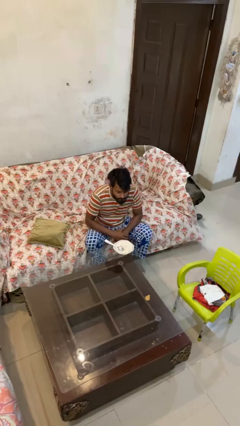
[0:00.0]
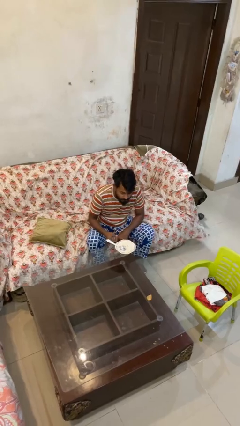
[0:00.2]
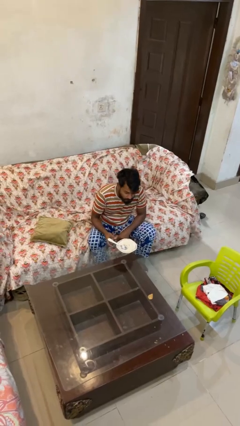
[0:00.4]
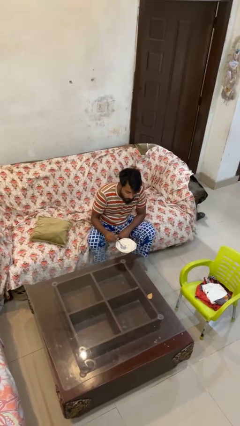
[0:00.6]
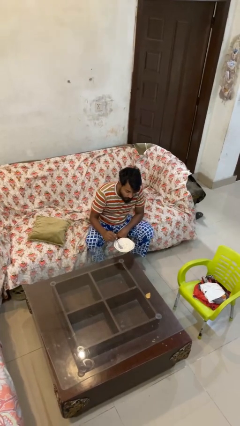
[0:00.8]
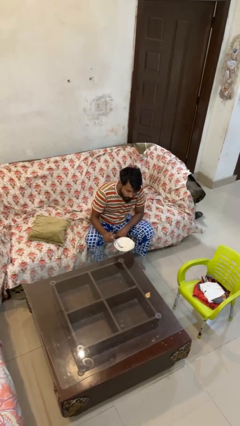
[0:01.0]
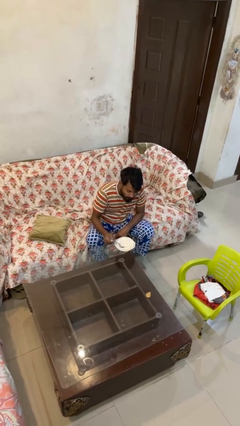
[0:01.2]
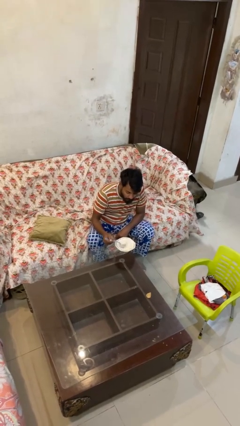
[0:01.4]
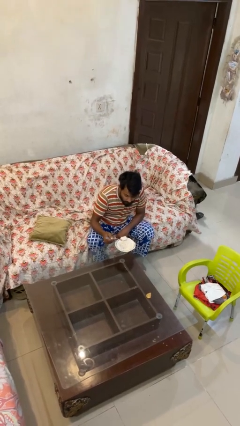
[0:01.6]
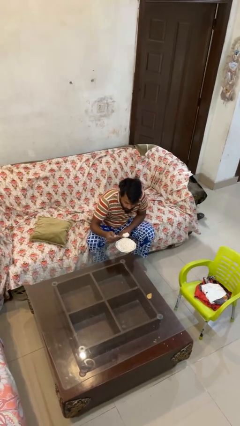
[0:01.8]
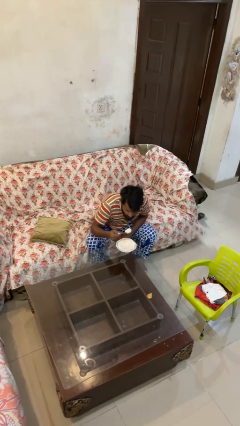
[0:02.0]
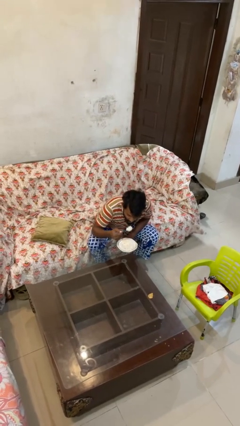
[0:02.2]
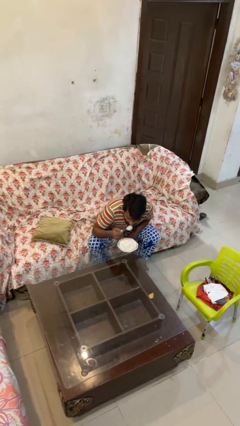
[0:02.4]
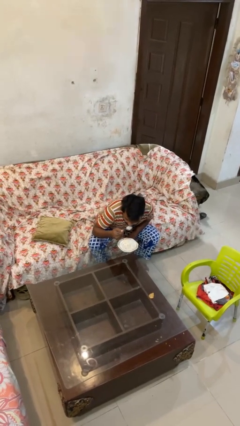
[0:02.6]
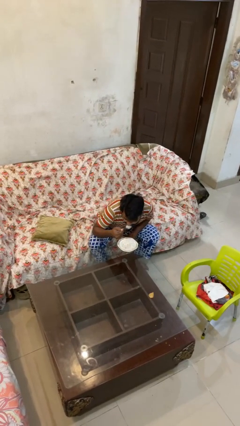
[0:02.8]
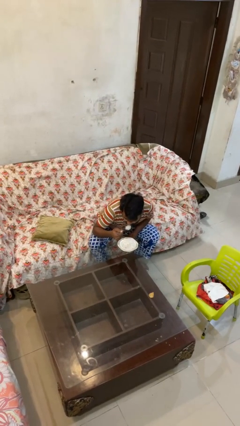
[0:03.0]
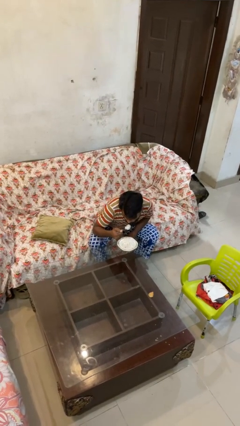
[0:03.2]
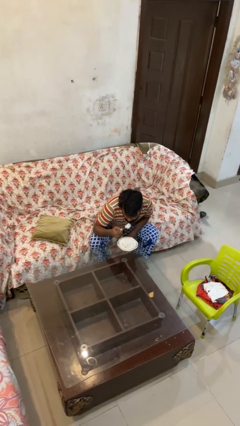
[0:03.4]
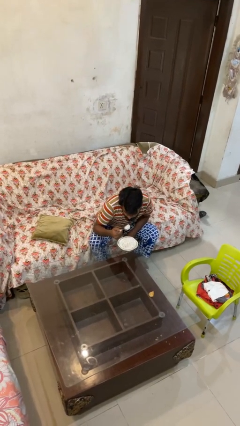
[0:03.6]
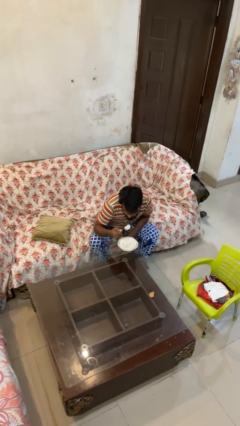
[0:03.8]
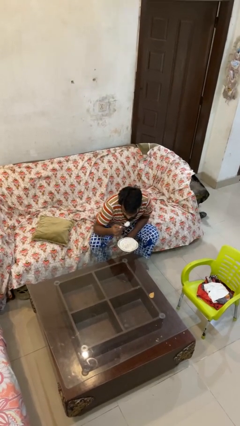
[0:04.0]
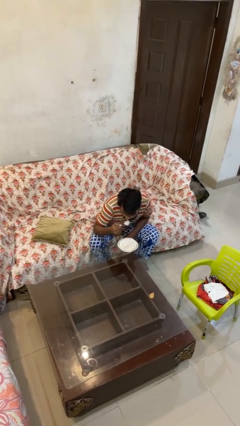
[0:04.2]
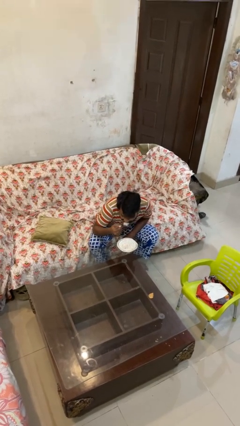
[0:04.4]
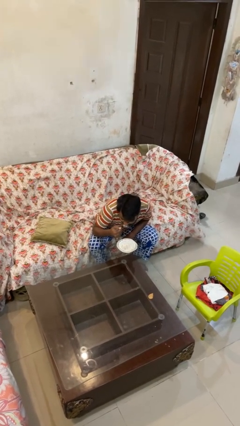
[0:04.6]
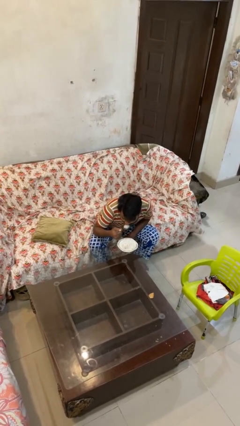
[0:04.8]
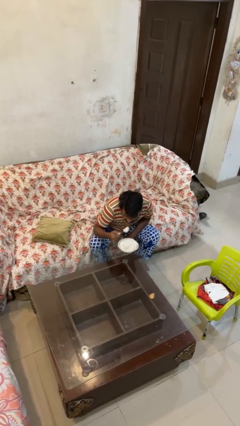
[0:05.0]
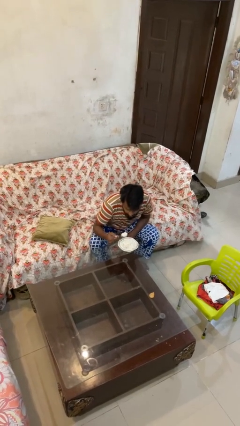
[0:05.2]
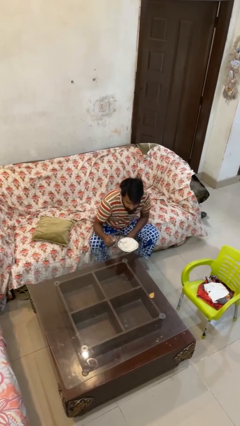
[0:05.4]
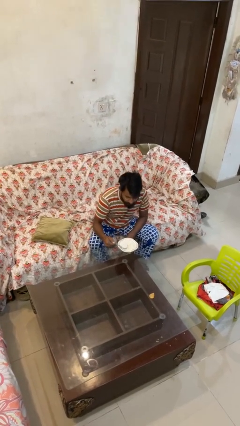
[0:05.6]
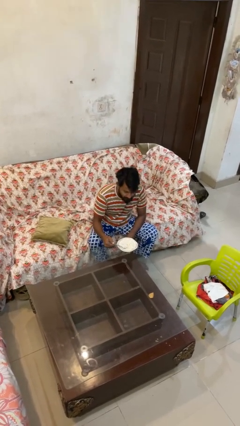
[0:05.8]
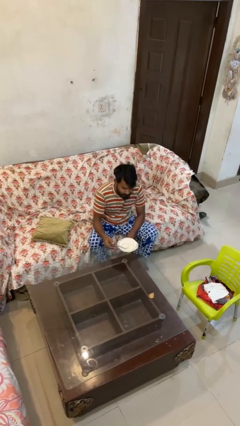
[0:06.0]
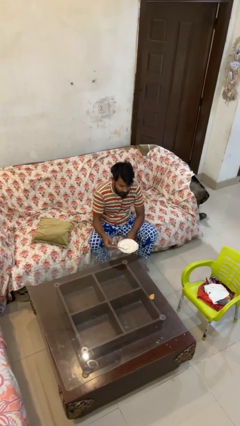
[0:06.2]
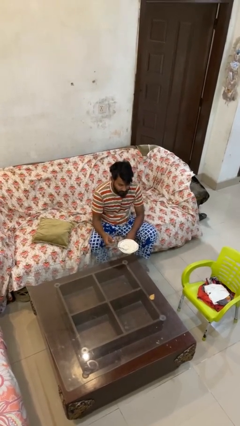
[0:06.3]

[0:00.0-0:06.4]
person eats with utensil

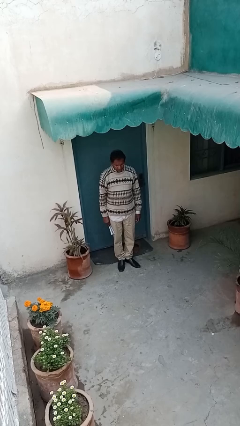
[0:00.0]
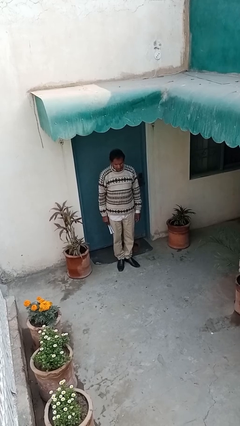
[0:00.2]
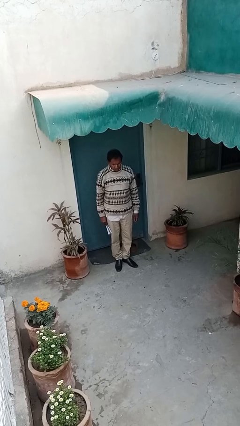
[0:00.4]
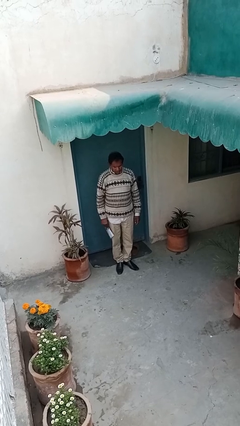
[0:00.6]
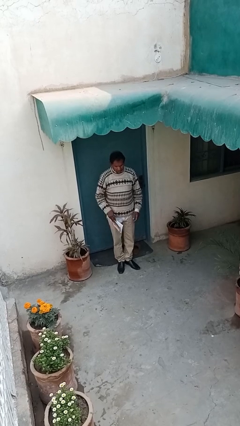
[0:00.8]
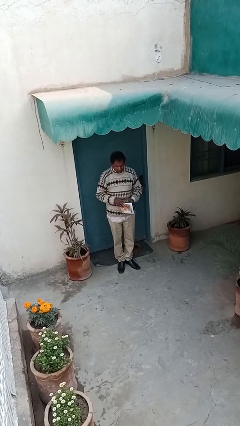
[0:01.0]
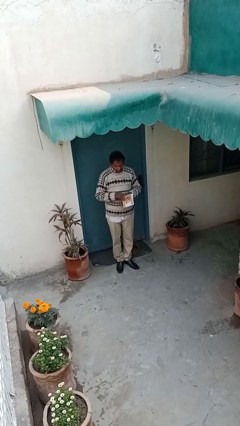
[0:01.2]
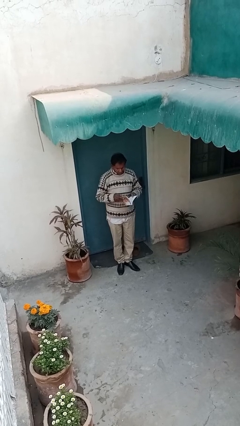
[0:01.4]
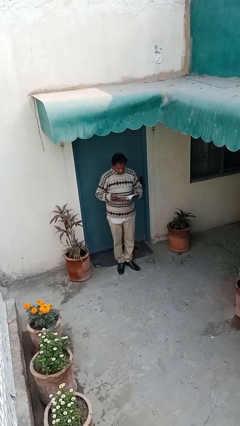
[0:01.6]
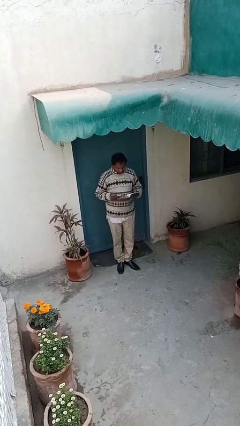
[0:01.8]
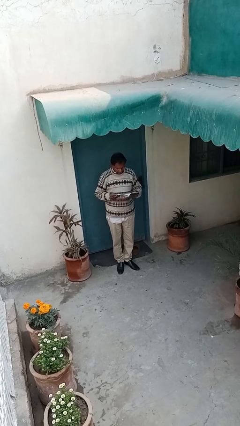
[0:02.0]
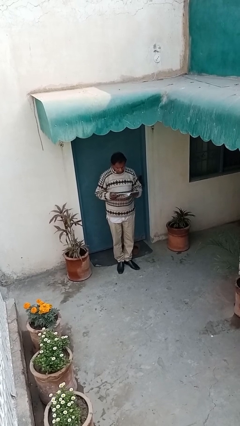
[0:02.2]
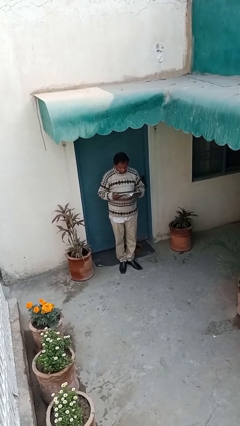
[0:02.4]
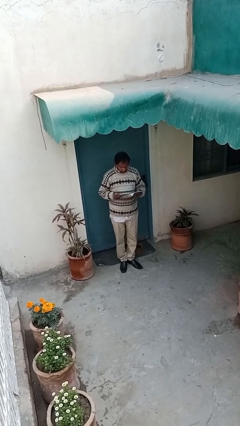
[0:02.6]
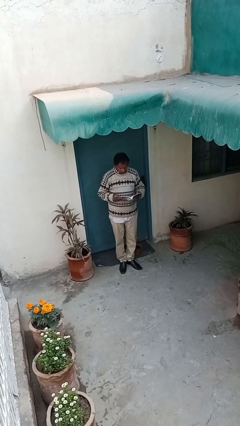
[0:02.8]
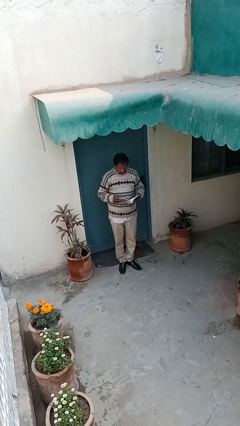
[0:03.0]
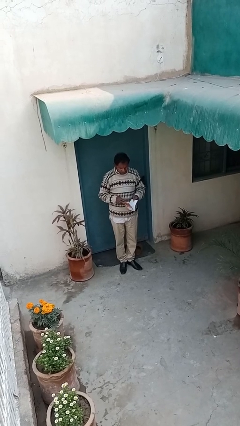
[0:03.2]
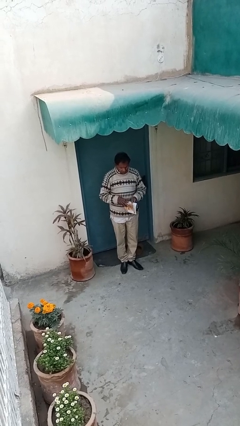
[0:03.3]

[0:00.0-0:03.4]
person reads document

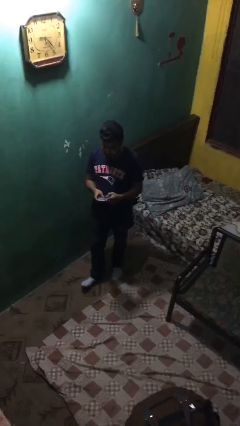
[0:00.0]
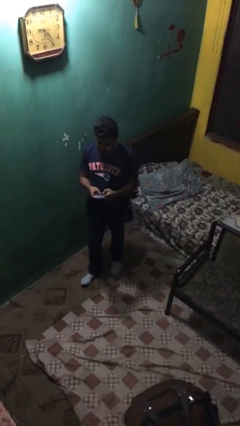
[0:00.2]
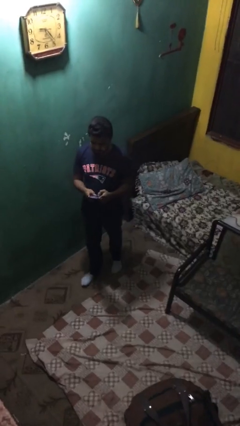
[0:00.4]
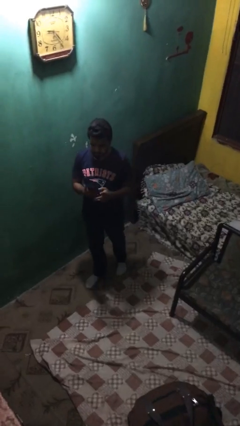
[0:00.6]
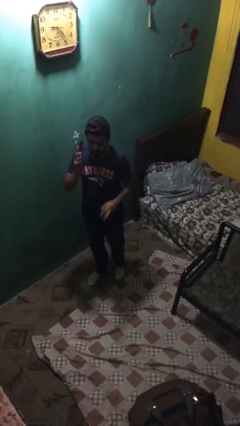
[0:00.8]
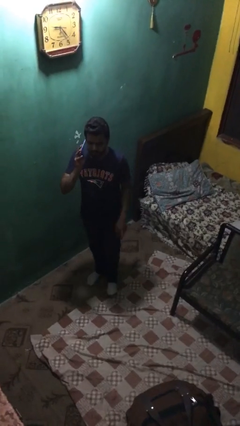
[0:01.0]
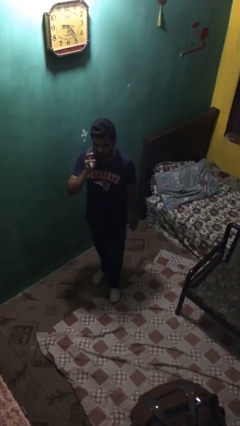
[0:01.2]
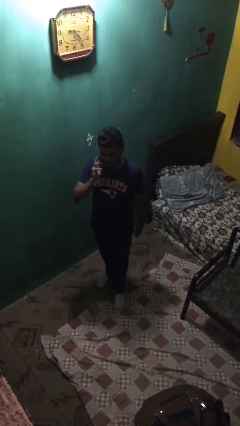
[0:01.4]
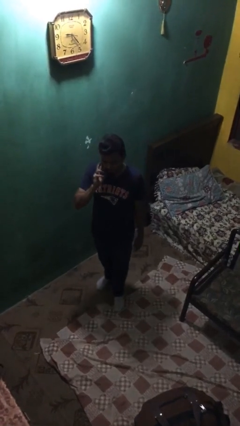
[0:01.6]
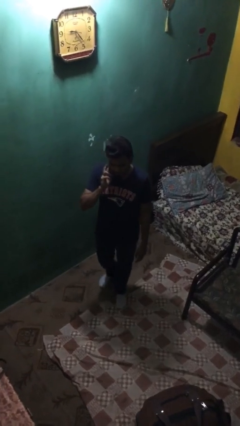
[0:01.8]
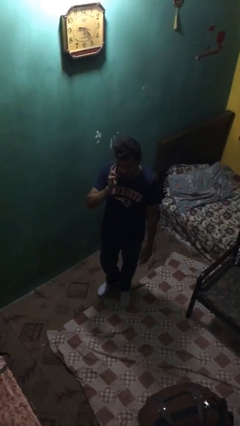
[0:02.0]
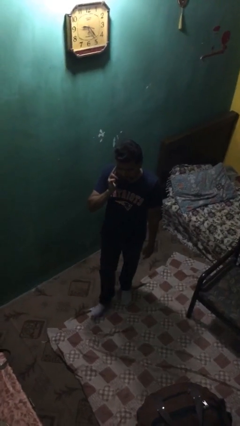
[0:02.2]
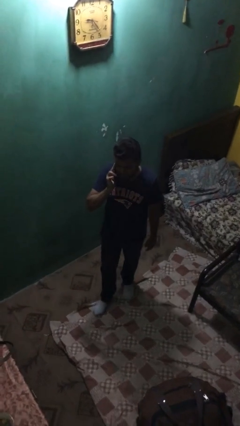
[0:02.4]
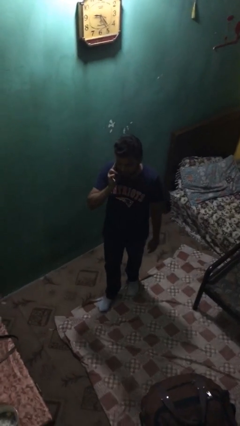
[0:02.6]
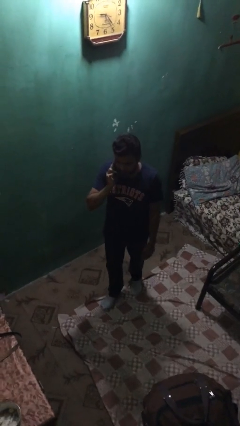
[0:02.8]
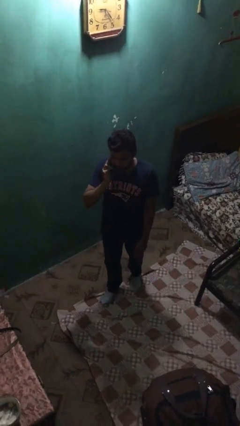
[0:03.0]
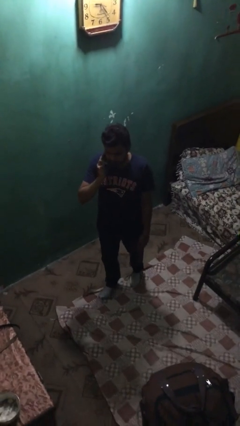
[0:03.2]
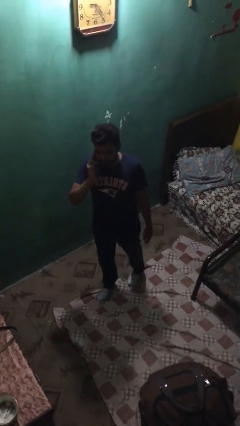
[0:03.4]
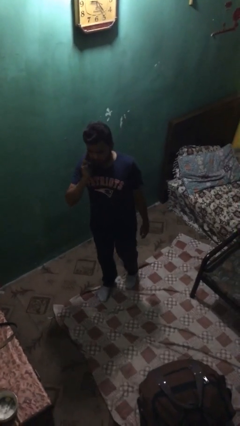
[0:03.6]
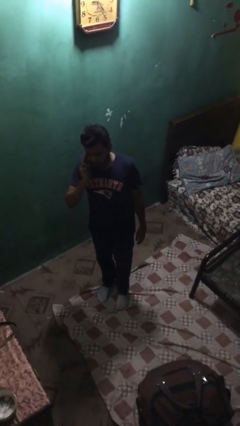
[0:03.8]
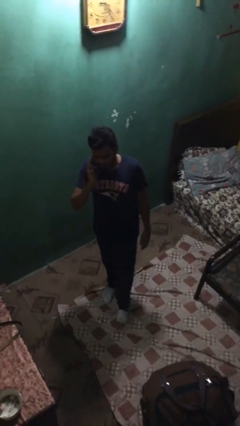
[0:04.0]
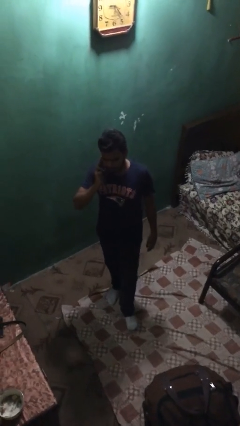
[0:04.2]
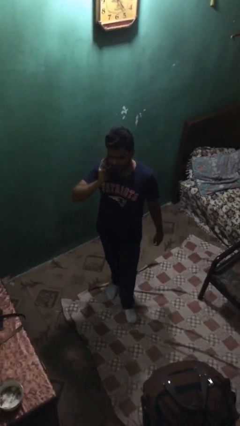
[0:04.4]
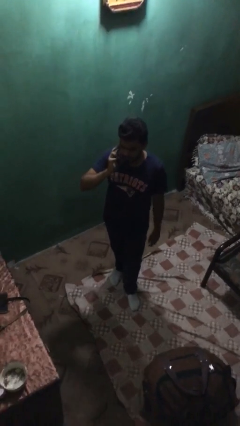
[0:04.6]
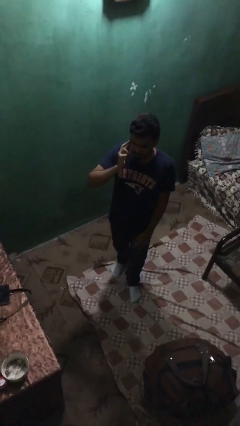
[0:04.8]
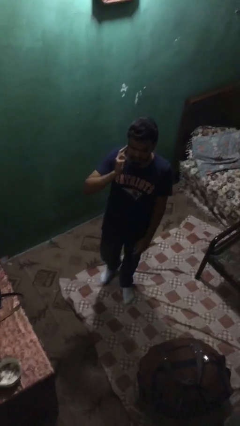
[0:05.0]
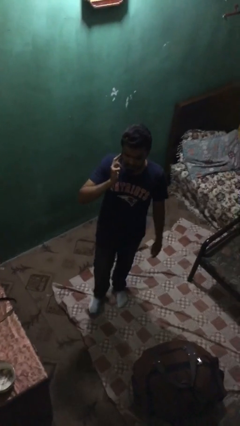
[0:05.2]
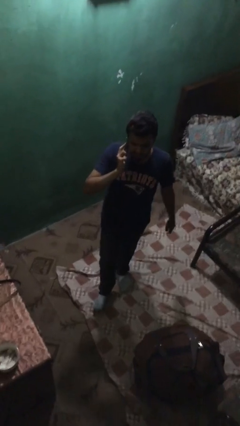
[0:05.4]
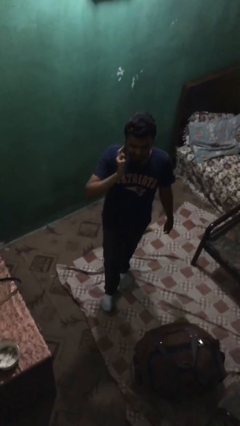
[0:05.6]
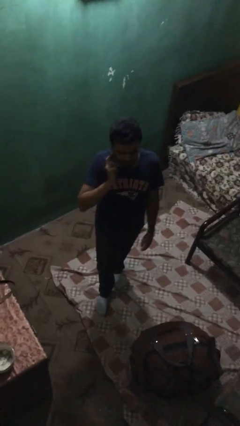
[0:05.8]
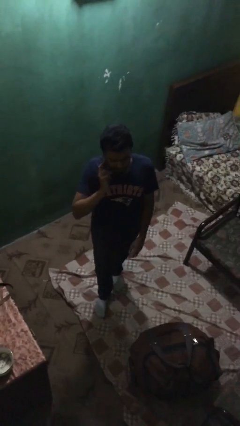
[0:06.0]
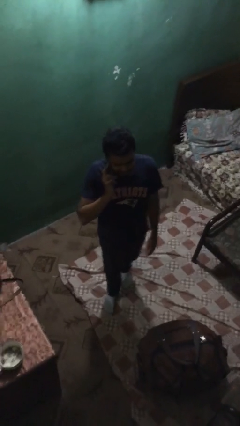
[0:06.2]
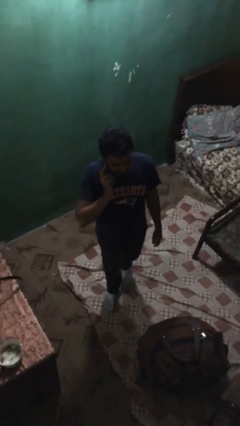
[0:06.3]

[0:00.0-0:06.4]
person talks on phone

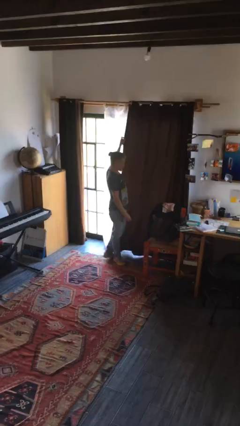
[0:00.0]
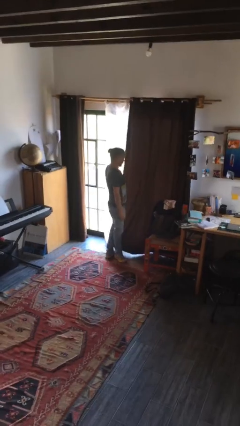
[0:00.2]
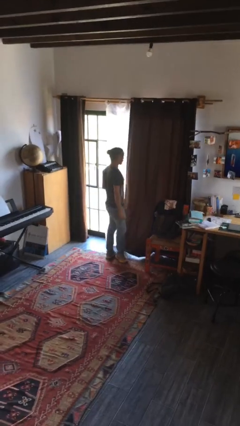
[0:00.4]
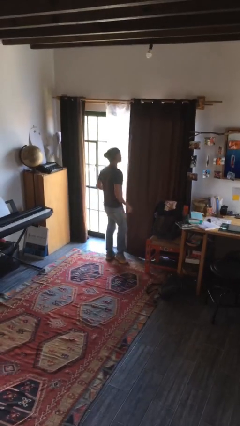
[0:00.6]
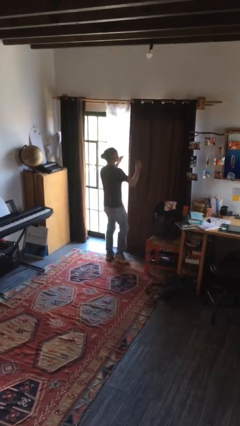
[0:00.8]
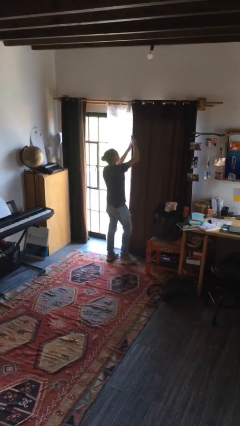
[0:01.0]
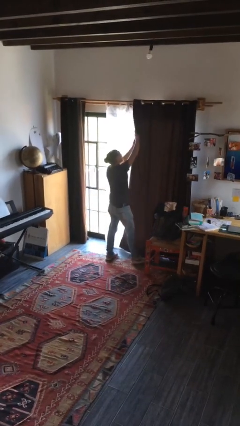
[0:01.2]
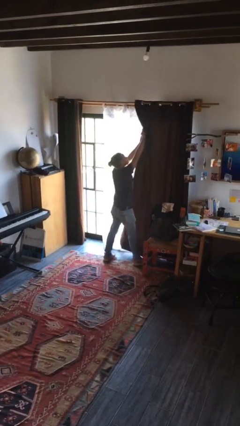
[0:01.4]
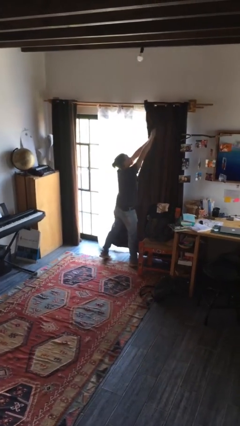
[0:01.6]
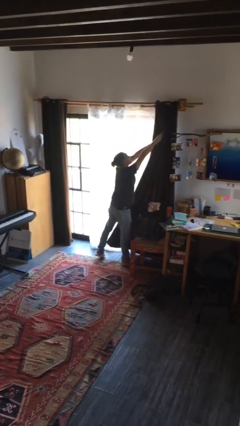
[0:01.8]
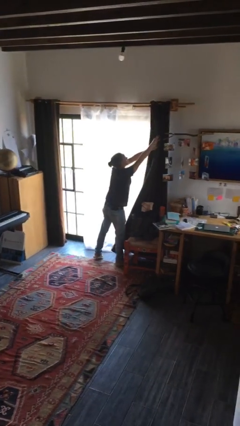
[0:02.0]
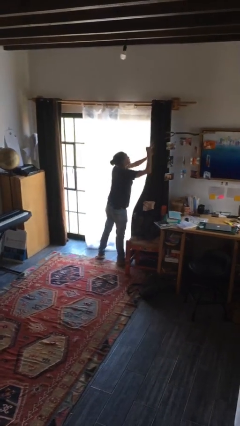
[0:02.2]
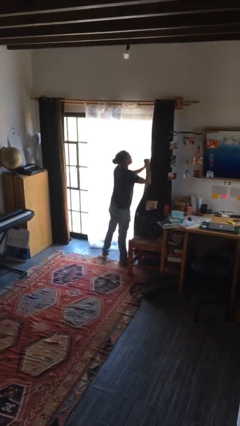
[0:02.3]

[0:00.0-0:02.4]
person opens curtains
